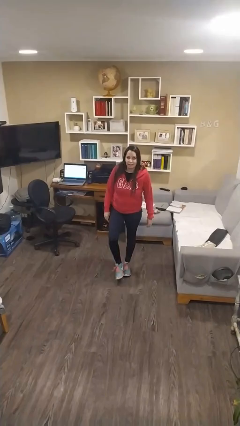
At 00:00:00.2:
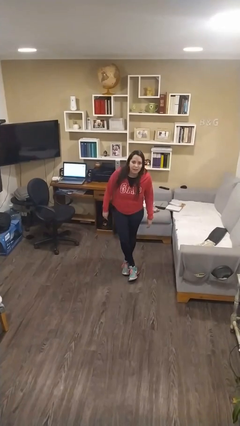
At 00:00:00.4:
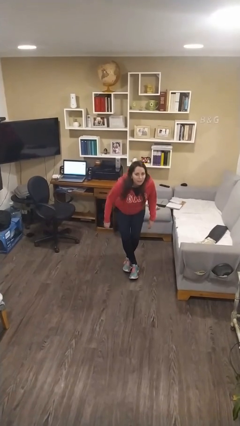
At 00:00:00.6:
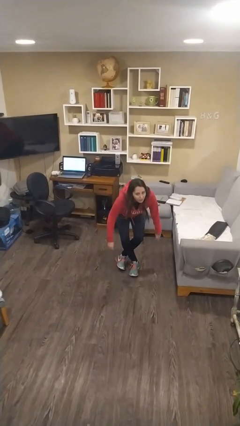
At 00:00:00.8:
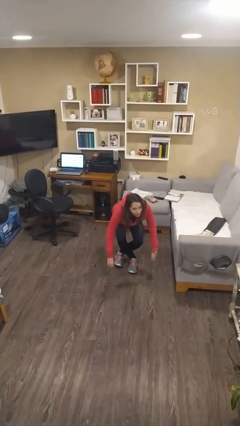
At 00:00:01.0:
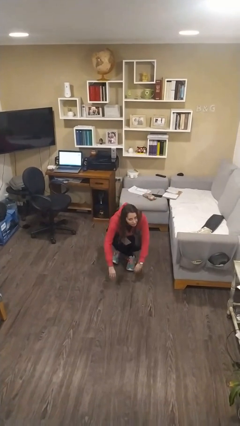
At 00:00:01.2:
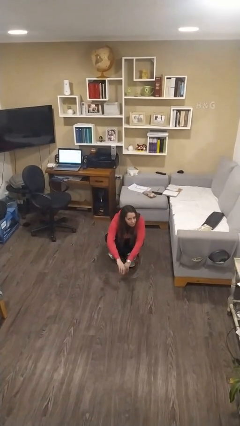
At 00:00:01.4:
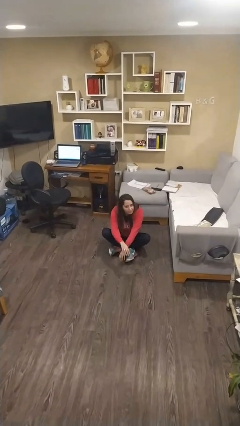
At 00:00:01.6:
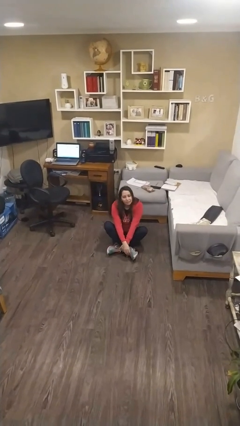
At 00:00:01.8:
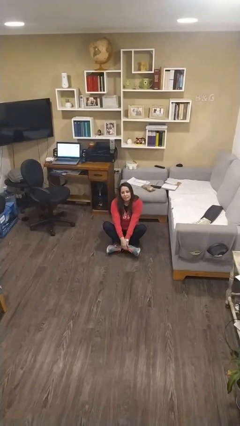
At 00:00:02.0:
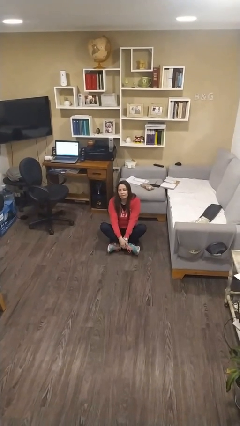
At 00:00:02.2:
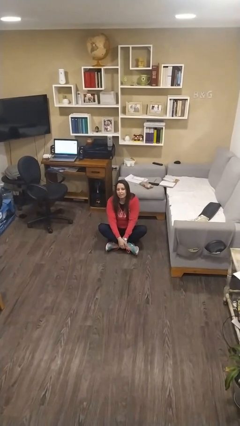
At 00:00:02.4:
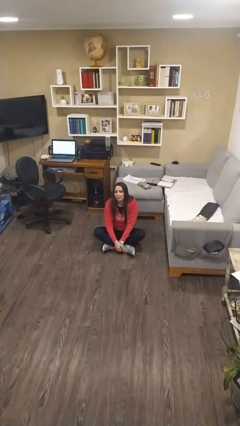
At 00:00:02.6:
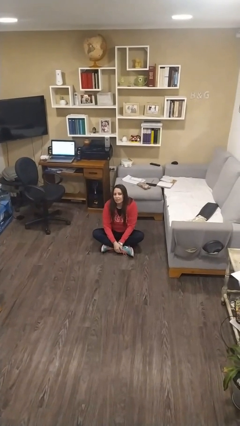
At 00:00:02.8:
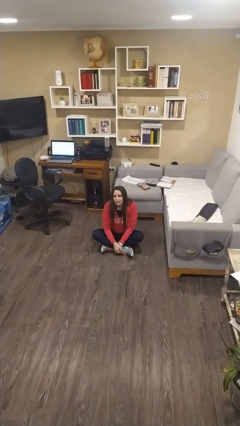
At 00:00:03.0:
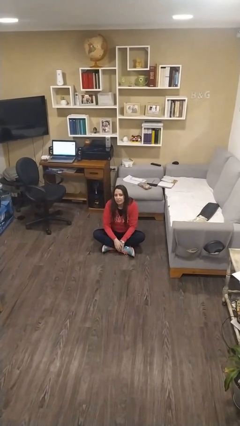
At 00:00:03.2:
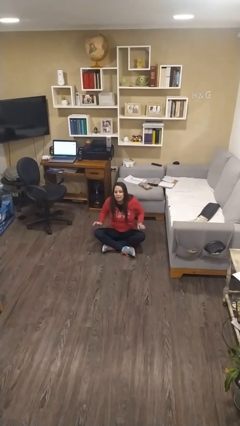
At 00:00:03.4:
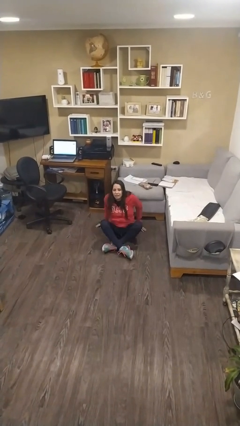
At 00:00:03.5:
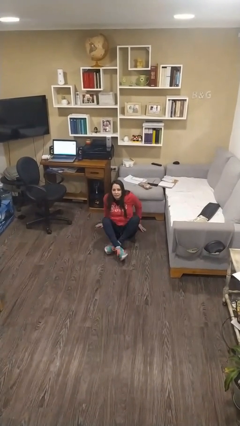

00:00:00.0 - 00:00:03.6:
person sits crisscross

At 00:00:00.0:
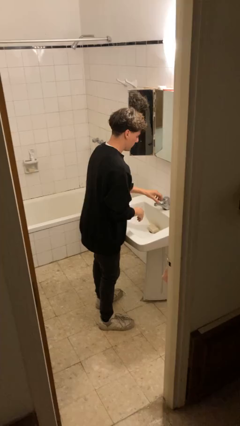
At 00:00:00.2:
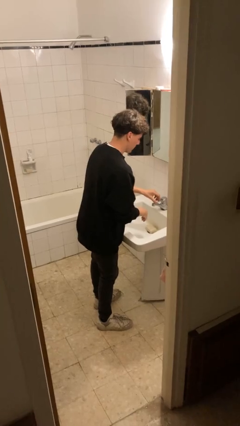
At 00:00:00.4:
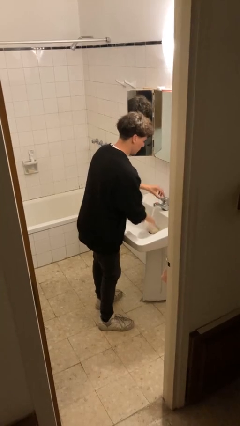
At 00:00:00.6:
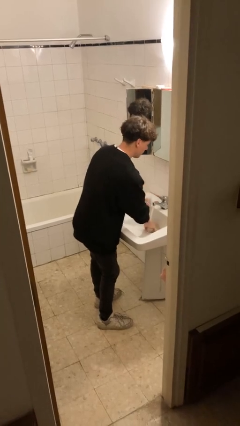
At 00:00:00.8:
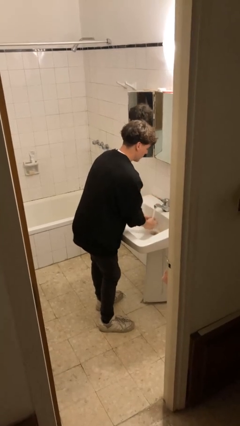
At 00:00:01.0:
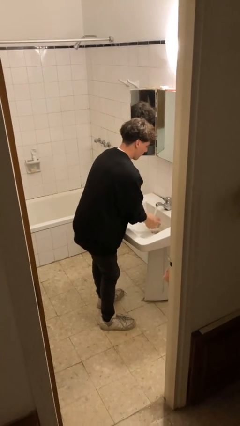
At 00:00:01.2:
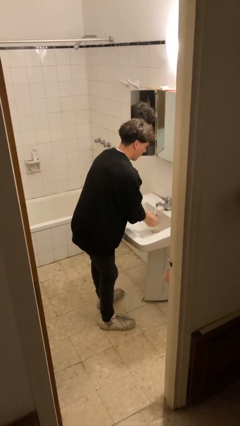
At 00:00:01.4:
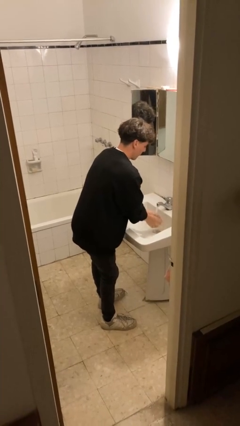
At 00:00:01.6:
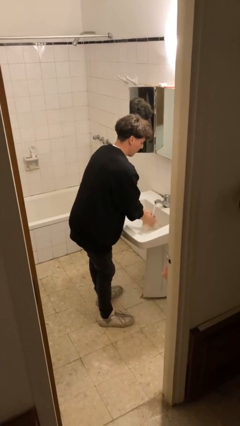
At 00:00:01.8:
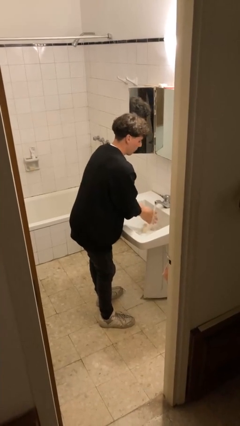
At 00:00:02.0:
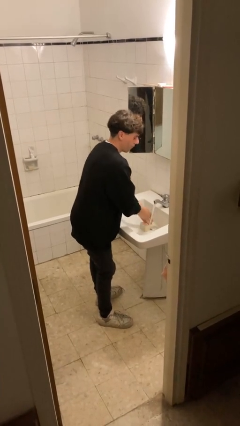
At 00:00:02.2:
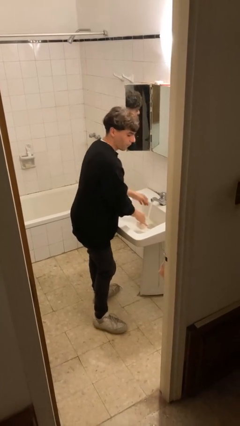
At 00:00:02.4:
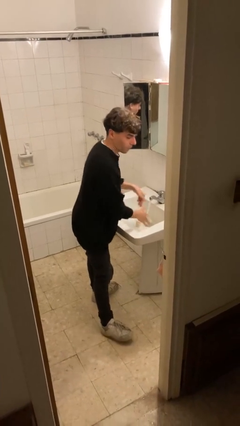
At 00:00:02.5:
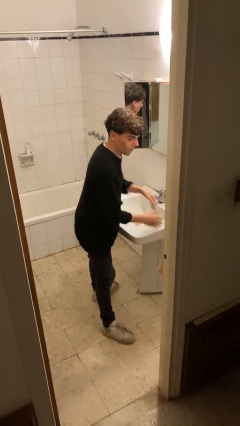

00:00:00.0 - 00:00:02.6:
person washes hands

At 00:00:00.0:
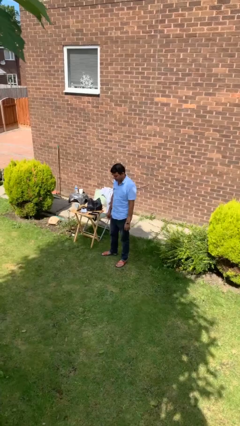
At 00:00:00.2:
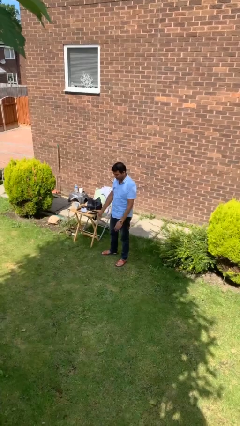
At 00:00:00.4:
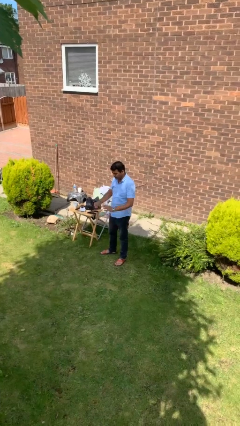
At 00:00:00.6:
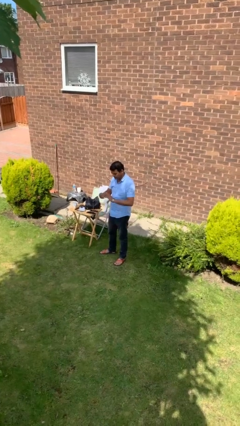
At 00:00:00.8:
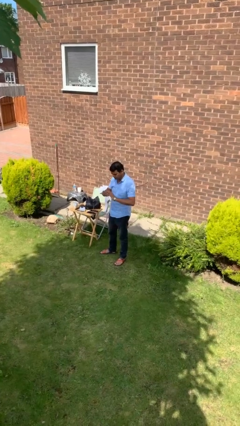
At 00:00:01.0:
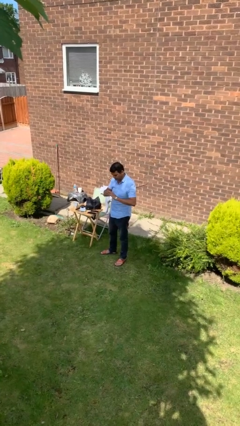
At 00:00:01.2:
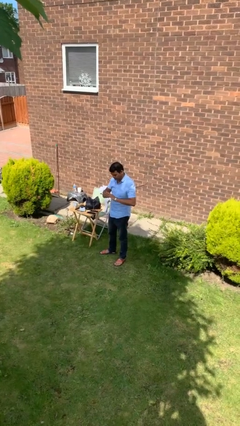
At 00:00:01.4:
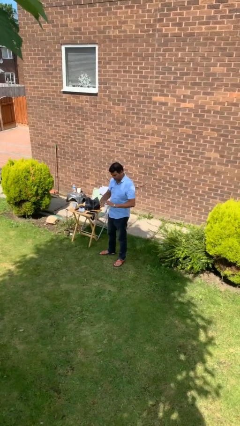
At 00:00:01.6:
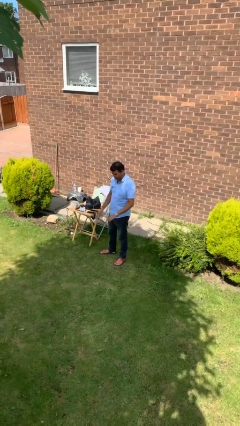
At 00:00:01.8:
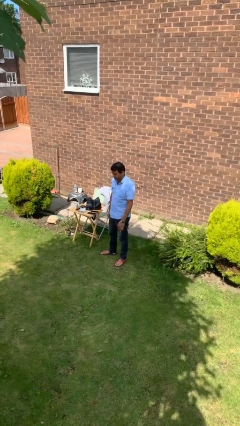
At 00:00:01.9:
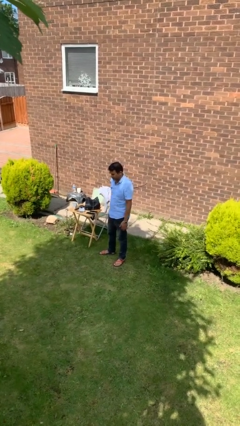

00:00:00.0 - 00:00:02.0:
person puts on ring

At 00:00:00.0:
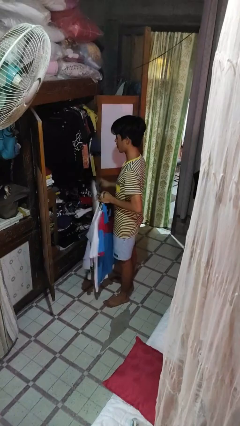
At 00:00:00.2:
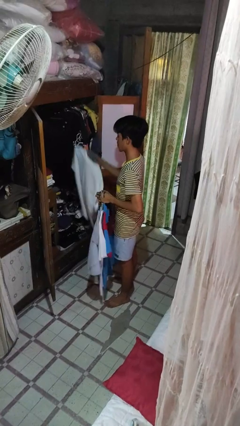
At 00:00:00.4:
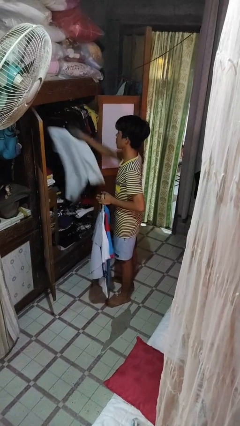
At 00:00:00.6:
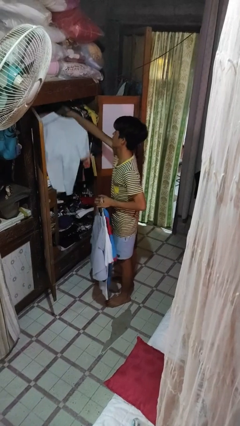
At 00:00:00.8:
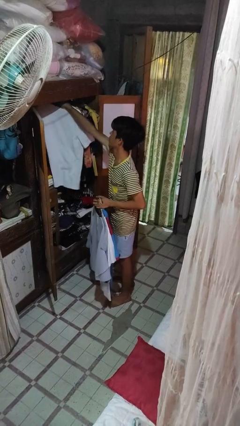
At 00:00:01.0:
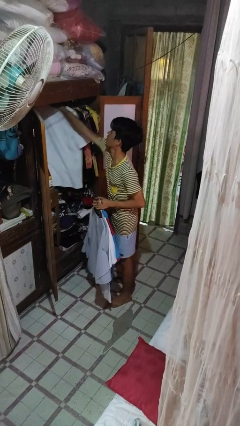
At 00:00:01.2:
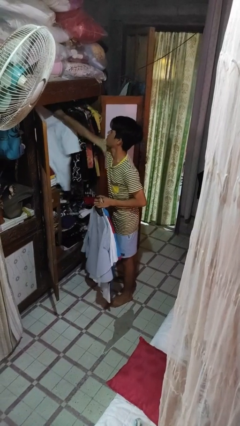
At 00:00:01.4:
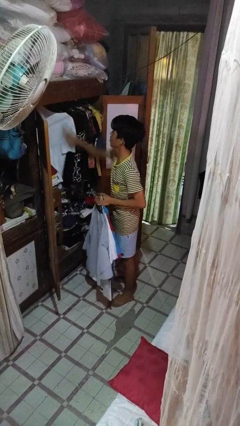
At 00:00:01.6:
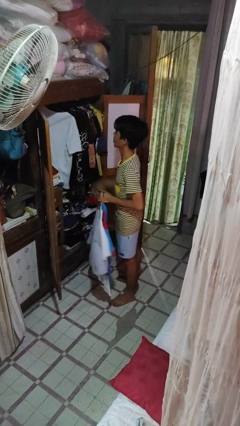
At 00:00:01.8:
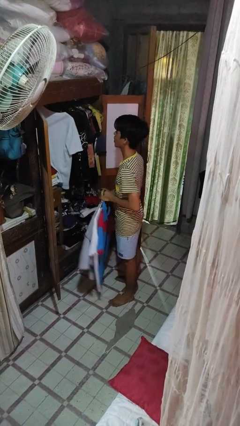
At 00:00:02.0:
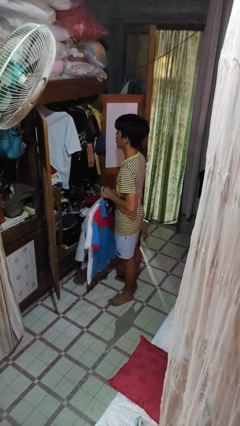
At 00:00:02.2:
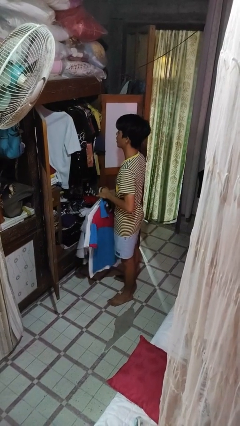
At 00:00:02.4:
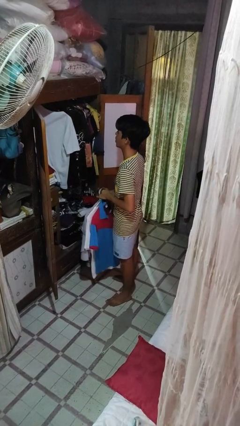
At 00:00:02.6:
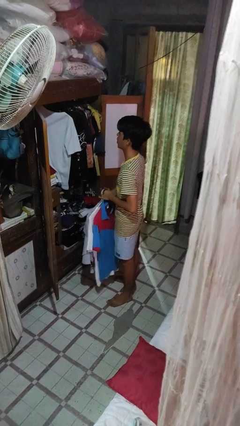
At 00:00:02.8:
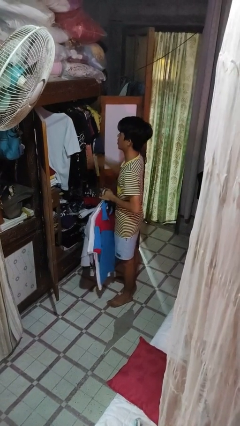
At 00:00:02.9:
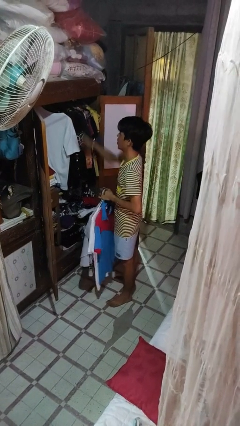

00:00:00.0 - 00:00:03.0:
person puts clothes into closet

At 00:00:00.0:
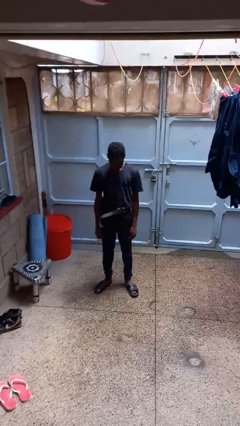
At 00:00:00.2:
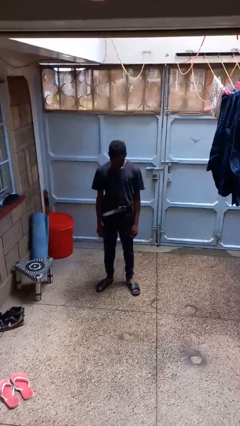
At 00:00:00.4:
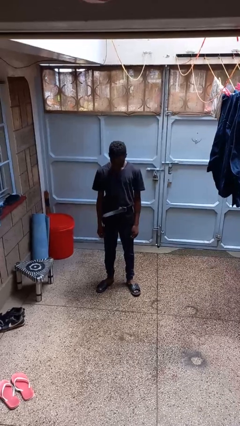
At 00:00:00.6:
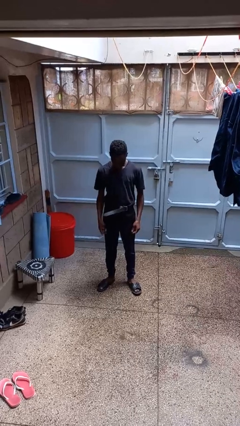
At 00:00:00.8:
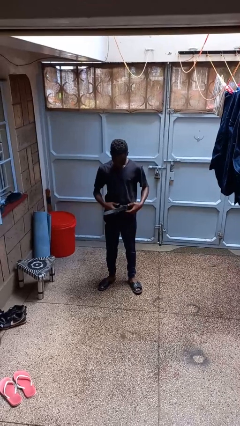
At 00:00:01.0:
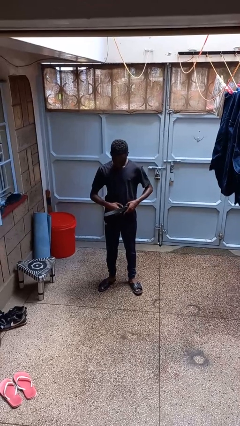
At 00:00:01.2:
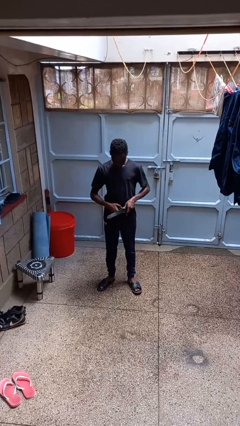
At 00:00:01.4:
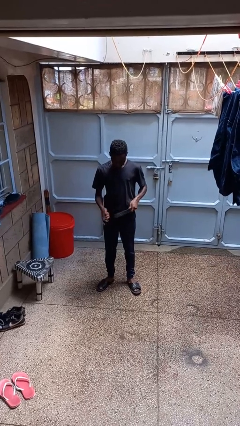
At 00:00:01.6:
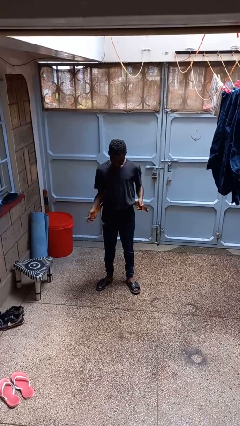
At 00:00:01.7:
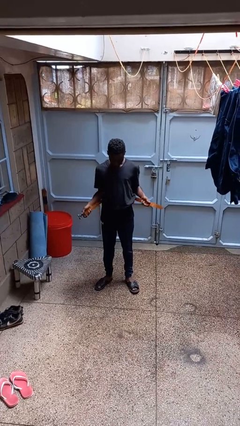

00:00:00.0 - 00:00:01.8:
person takes off belt

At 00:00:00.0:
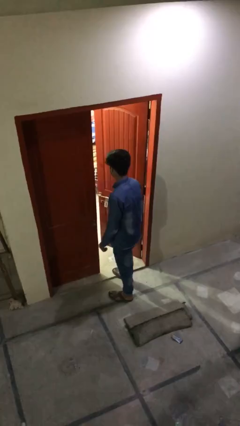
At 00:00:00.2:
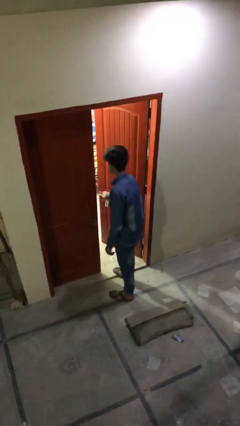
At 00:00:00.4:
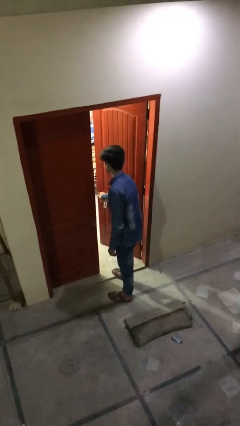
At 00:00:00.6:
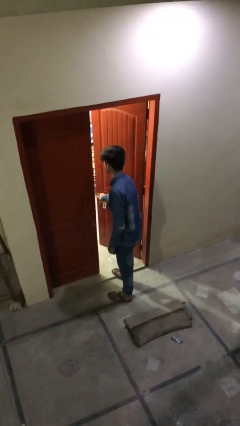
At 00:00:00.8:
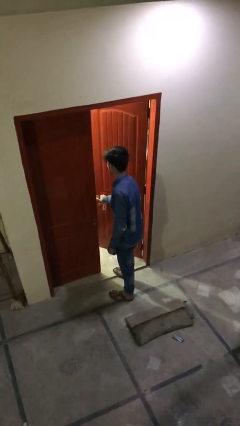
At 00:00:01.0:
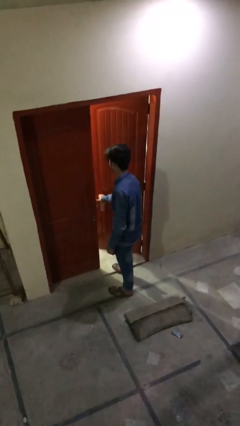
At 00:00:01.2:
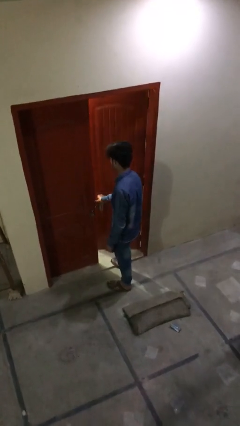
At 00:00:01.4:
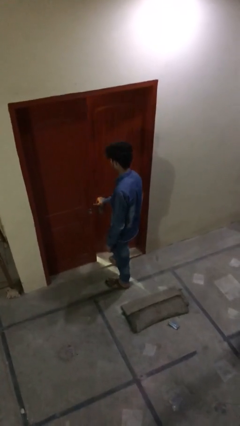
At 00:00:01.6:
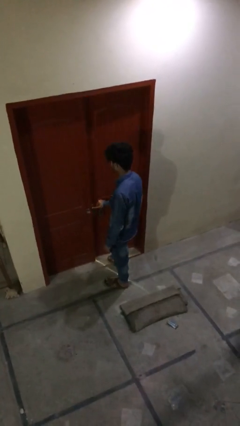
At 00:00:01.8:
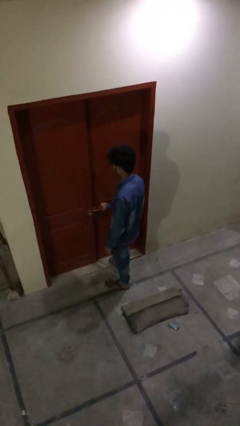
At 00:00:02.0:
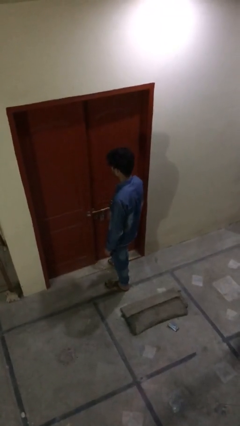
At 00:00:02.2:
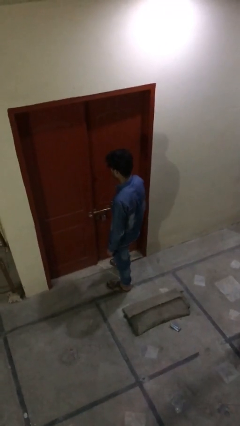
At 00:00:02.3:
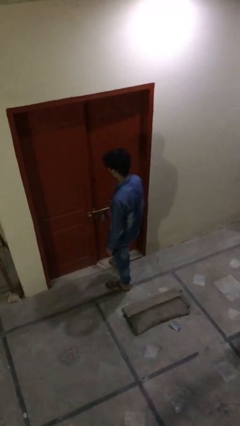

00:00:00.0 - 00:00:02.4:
person closes facility door

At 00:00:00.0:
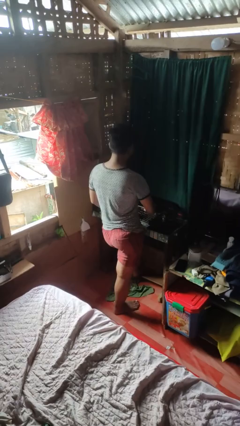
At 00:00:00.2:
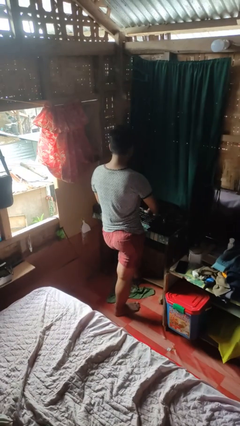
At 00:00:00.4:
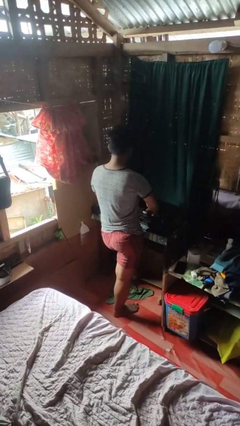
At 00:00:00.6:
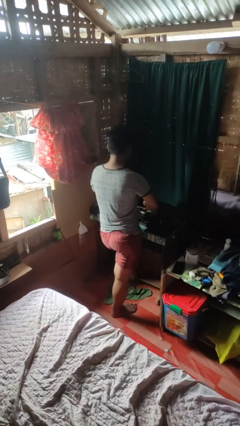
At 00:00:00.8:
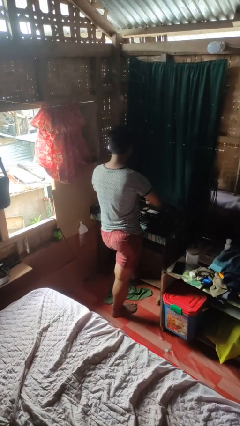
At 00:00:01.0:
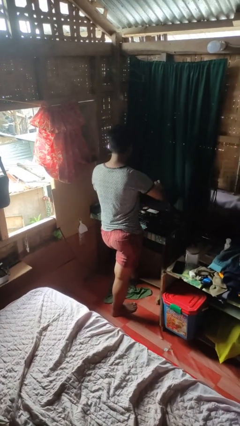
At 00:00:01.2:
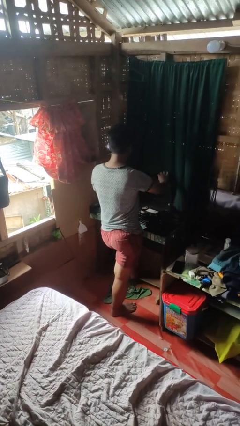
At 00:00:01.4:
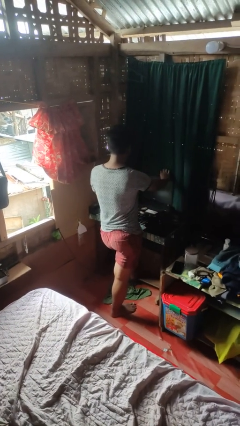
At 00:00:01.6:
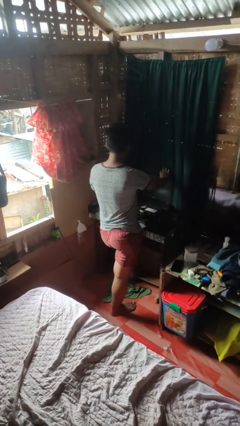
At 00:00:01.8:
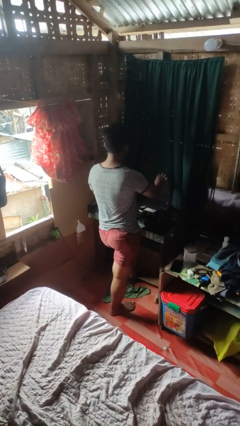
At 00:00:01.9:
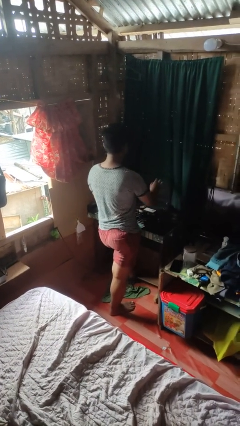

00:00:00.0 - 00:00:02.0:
person opens laptop
